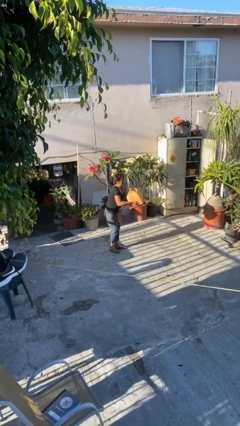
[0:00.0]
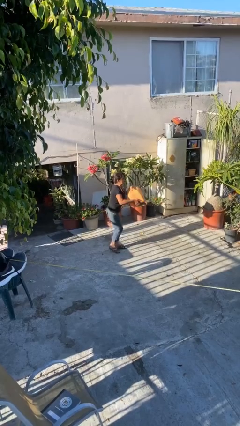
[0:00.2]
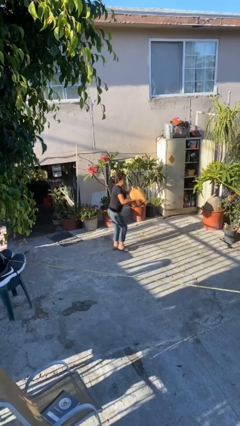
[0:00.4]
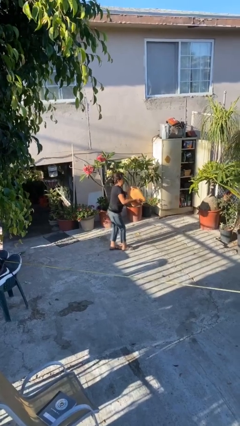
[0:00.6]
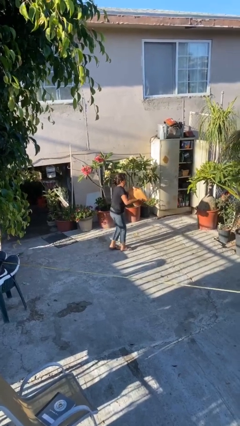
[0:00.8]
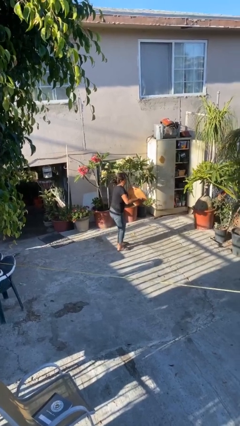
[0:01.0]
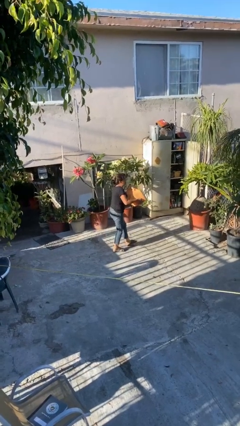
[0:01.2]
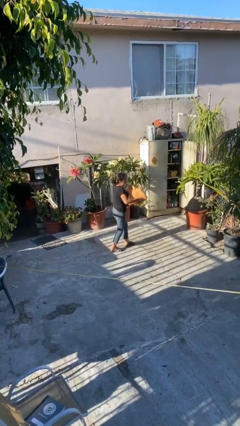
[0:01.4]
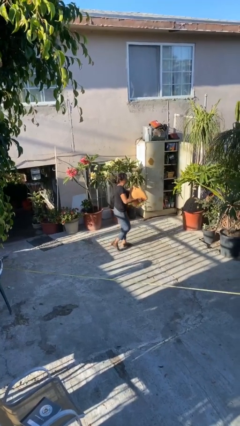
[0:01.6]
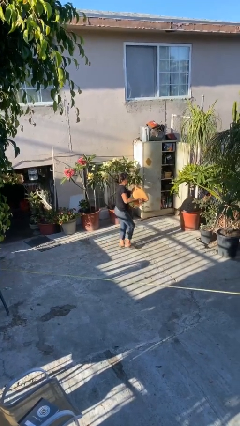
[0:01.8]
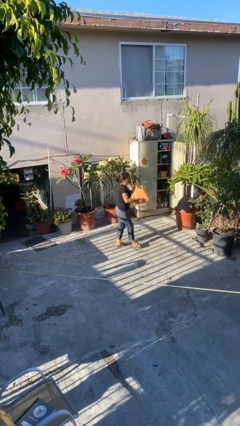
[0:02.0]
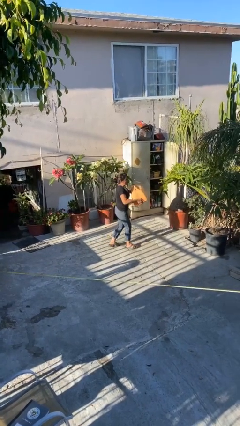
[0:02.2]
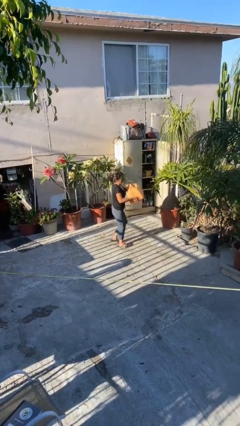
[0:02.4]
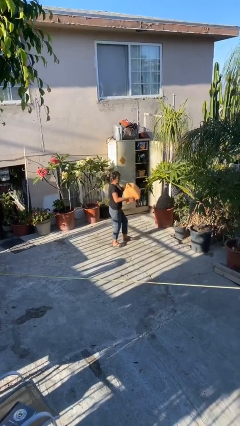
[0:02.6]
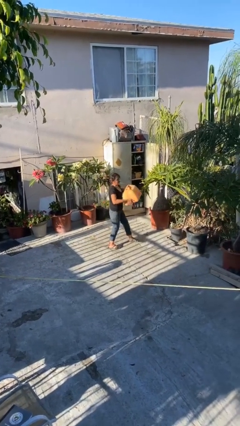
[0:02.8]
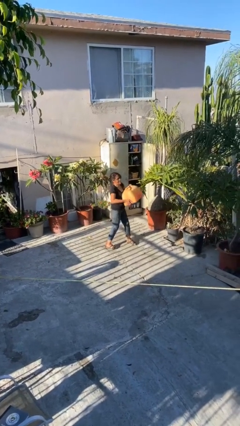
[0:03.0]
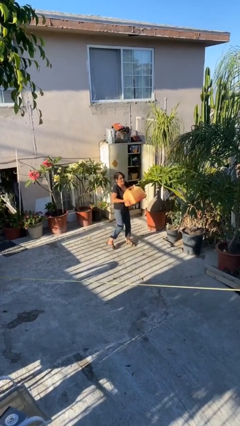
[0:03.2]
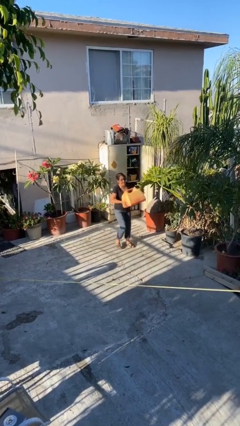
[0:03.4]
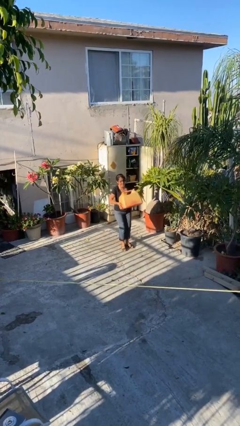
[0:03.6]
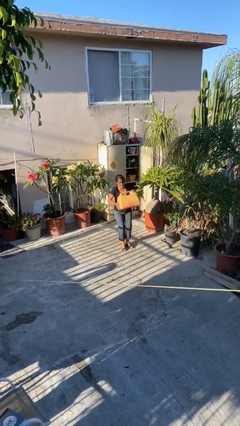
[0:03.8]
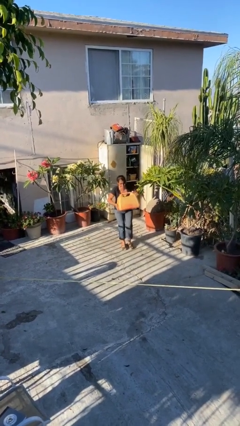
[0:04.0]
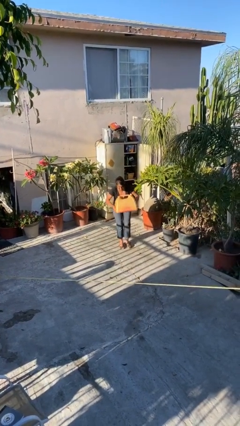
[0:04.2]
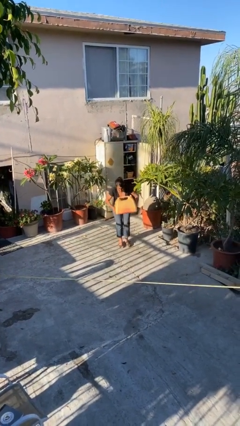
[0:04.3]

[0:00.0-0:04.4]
person carries heavy object

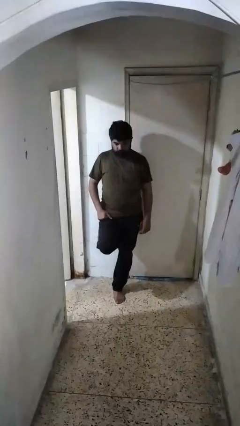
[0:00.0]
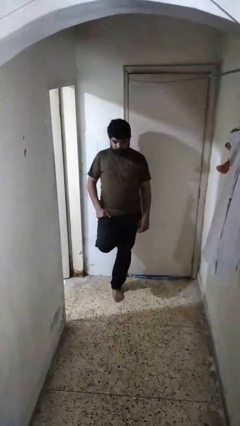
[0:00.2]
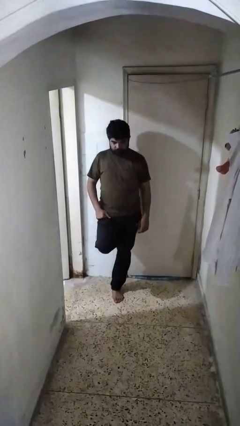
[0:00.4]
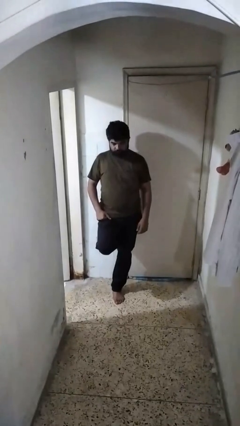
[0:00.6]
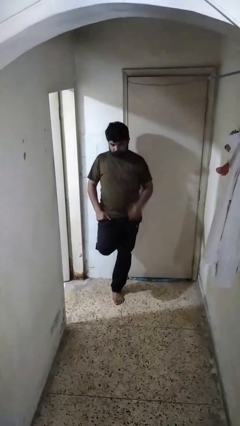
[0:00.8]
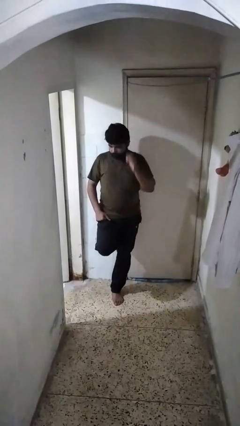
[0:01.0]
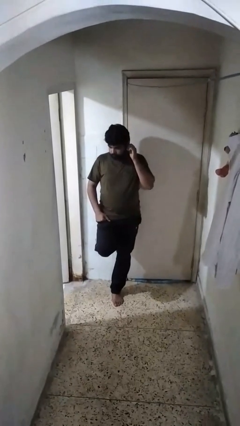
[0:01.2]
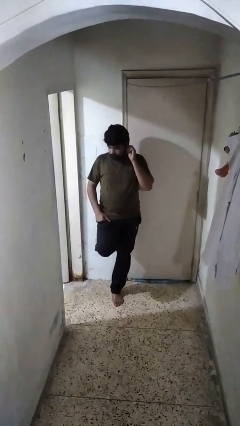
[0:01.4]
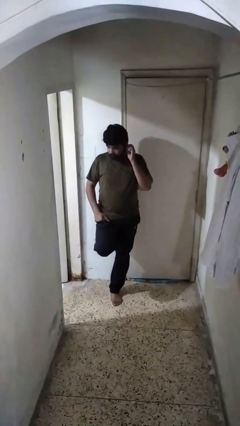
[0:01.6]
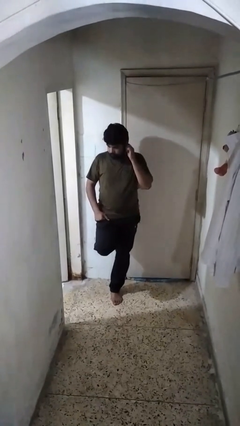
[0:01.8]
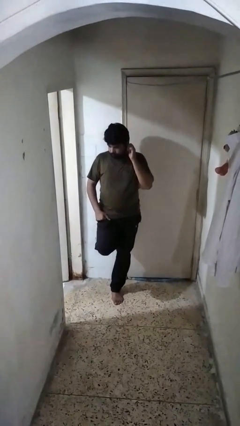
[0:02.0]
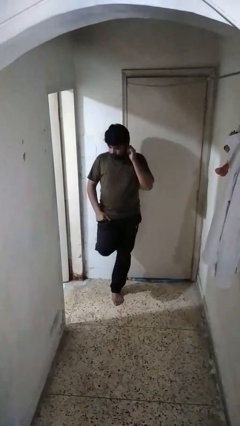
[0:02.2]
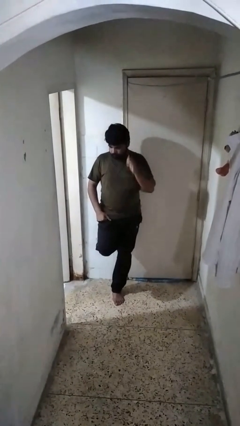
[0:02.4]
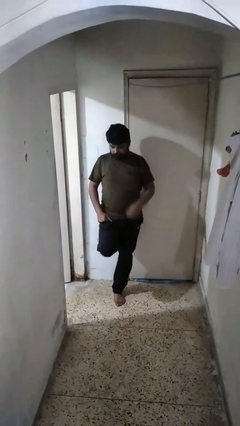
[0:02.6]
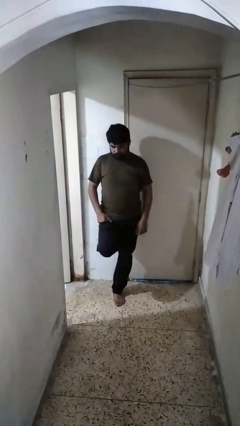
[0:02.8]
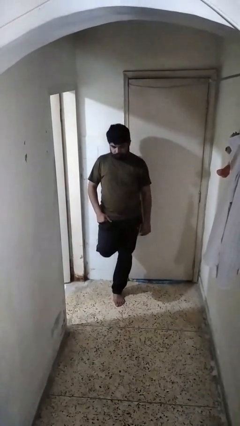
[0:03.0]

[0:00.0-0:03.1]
person touches earlobe

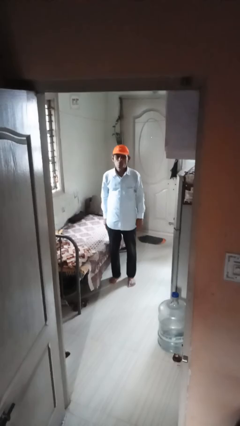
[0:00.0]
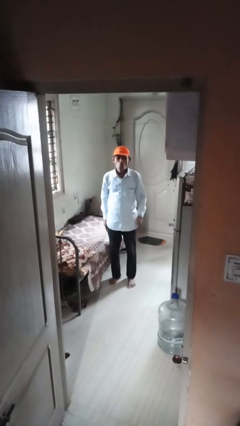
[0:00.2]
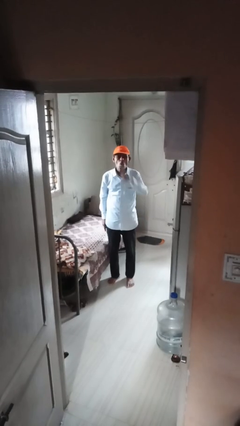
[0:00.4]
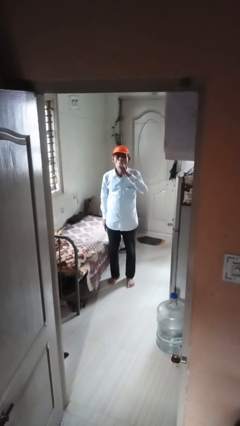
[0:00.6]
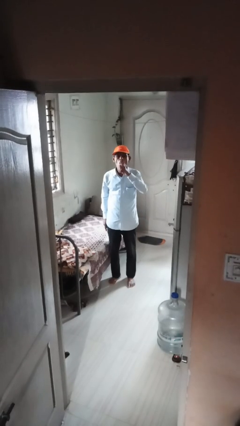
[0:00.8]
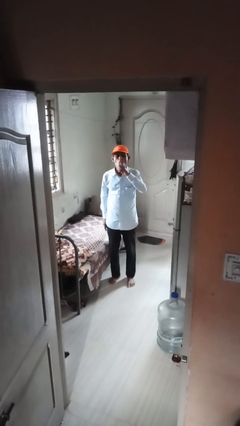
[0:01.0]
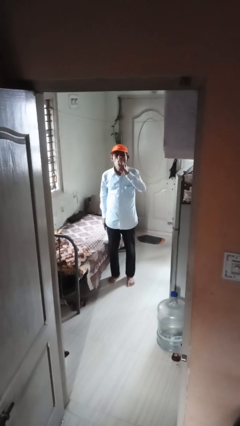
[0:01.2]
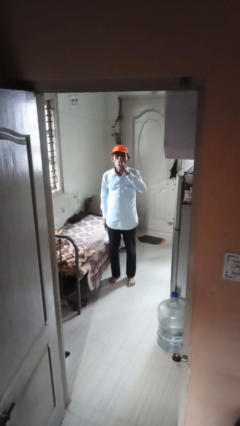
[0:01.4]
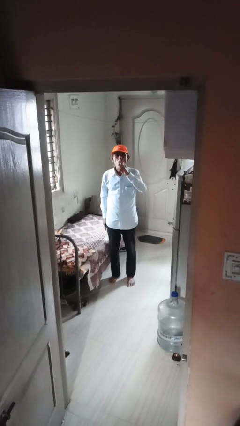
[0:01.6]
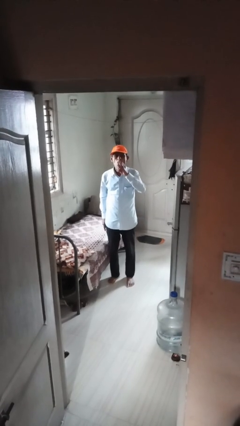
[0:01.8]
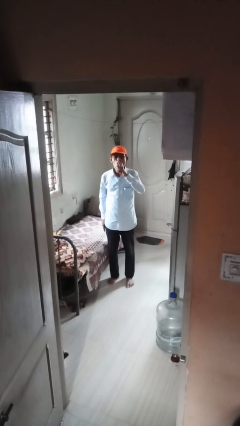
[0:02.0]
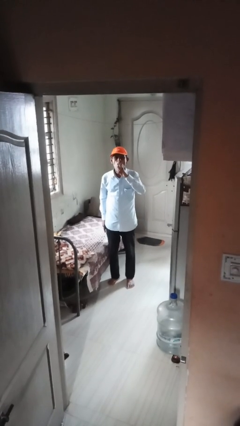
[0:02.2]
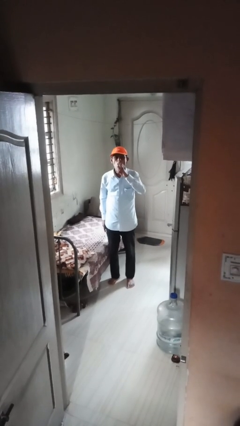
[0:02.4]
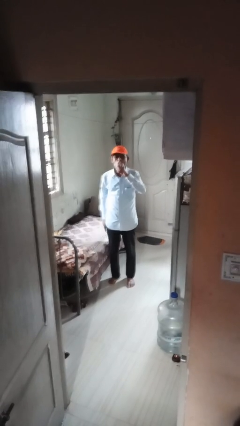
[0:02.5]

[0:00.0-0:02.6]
person gestures be quiet

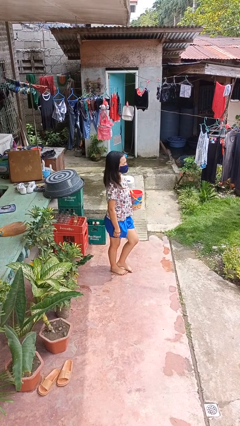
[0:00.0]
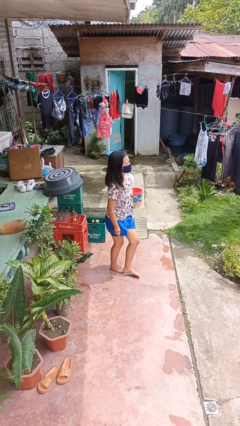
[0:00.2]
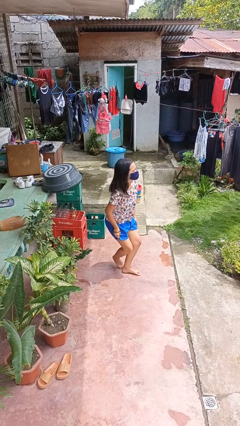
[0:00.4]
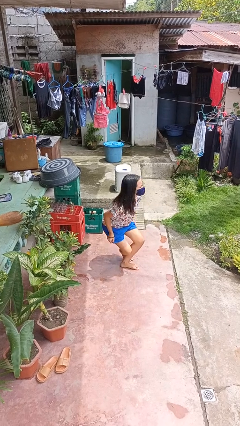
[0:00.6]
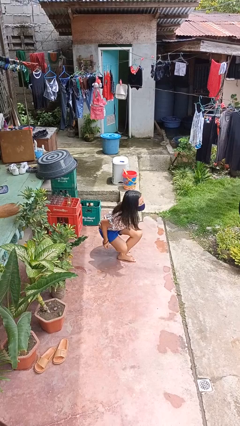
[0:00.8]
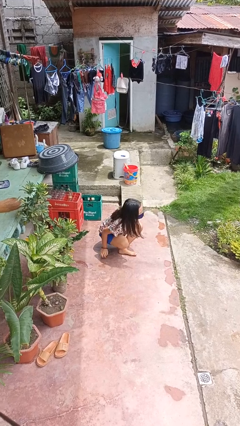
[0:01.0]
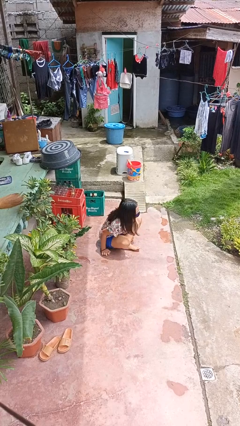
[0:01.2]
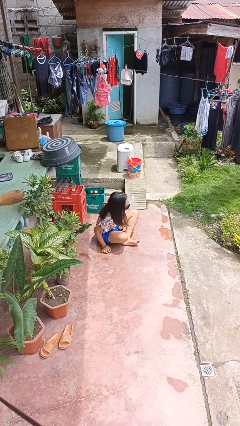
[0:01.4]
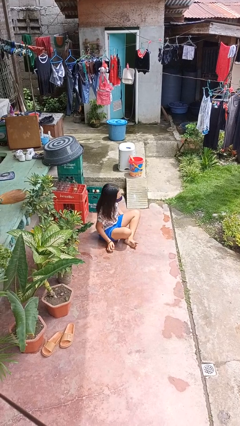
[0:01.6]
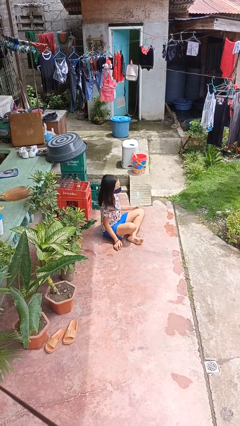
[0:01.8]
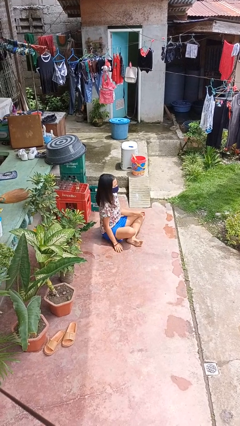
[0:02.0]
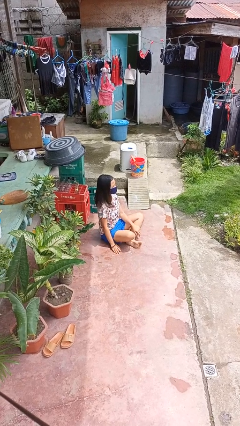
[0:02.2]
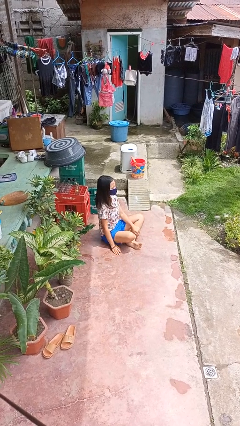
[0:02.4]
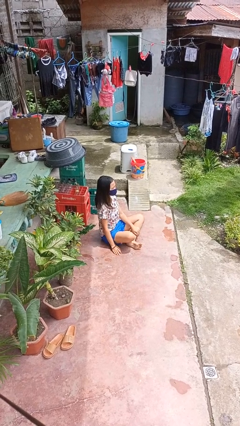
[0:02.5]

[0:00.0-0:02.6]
person sits crisscross

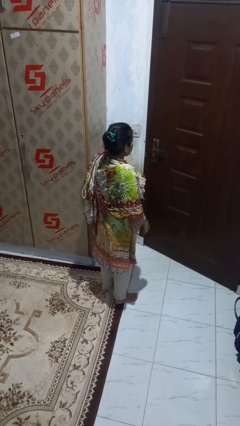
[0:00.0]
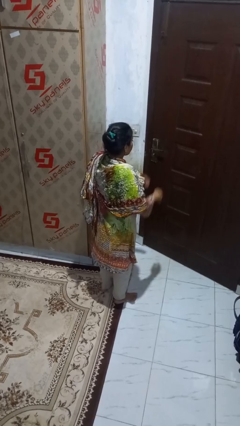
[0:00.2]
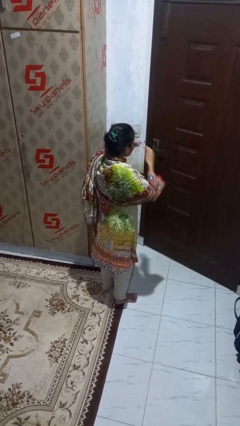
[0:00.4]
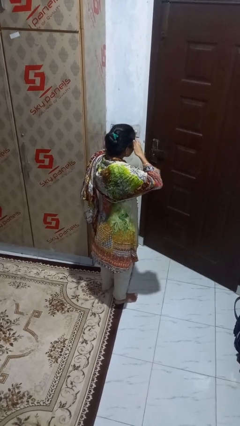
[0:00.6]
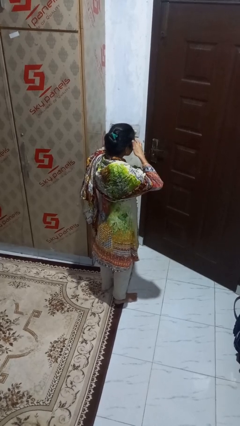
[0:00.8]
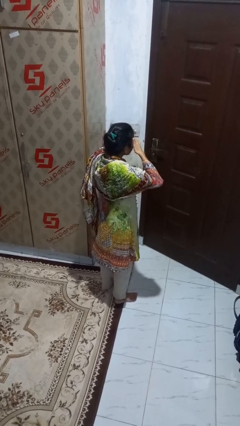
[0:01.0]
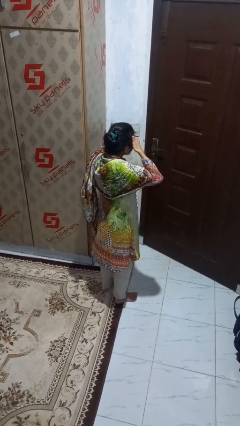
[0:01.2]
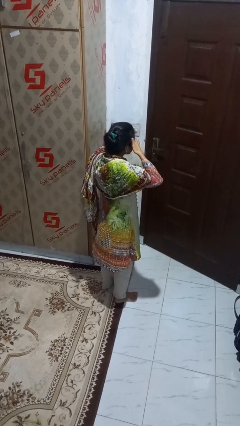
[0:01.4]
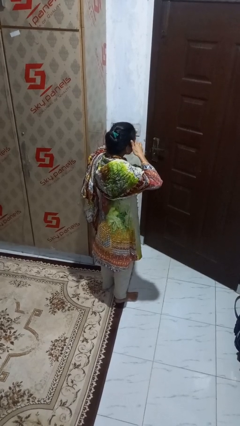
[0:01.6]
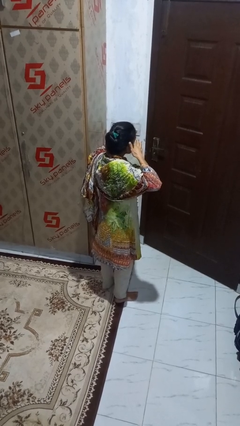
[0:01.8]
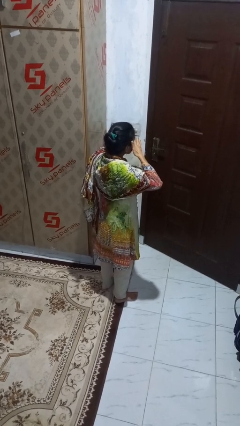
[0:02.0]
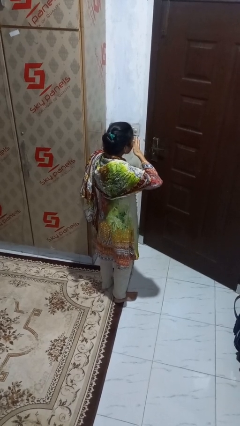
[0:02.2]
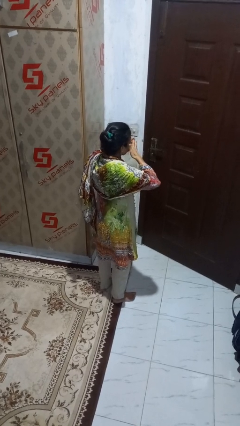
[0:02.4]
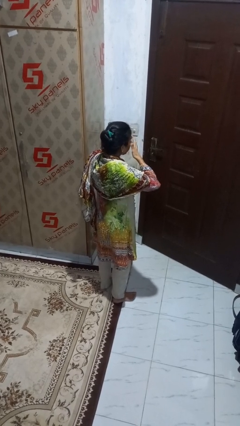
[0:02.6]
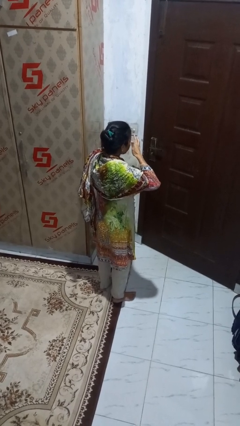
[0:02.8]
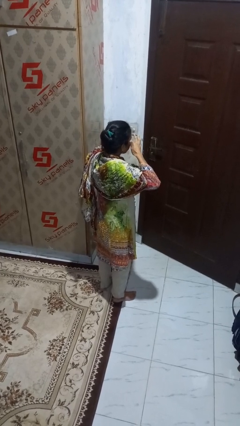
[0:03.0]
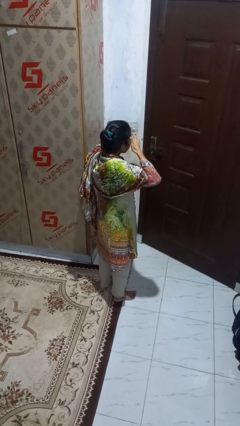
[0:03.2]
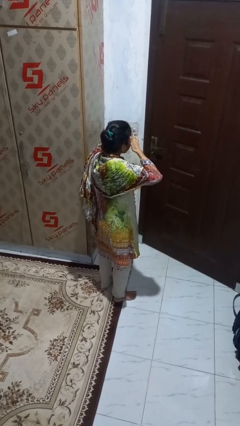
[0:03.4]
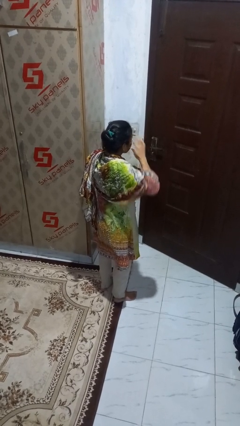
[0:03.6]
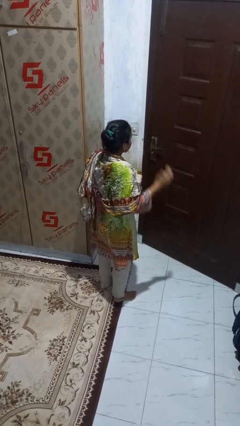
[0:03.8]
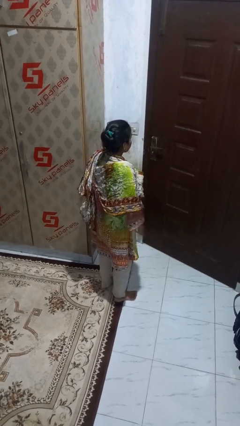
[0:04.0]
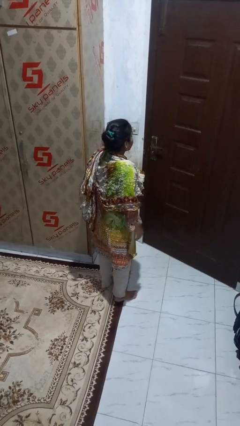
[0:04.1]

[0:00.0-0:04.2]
person rubs eyes

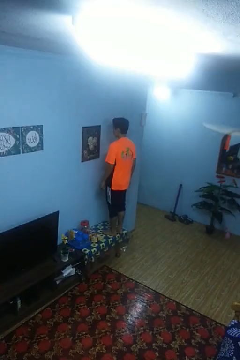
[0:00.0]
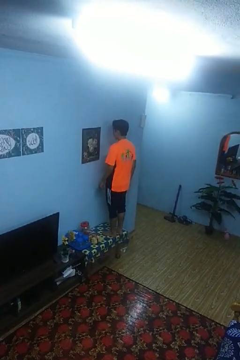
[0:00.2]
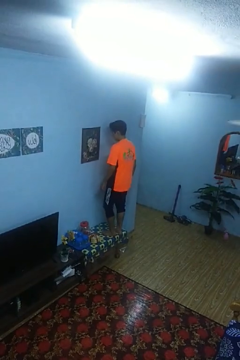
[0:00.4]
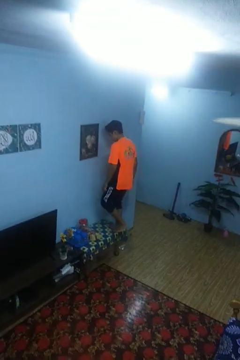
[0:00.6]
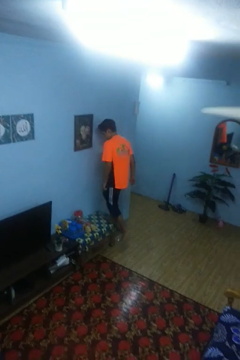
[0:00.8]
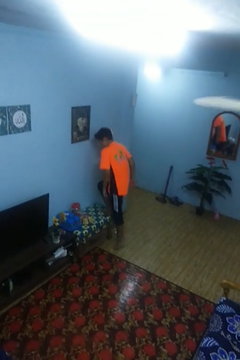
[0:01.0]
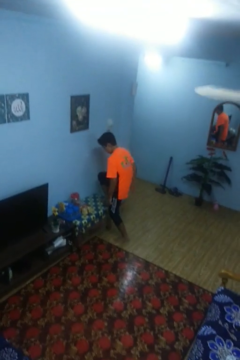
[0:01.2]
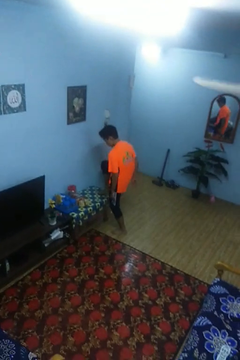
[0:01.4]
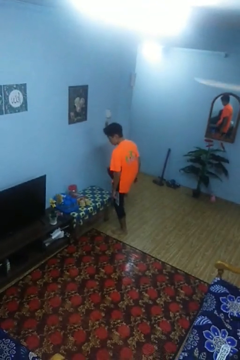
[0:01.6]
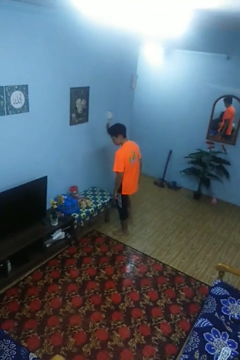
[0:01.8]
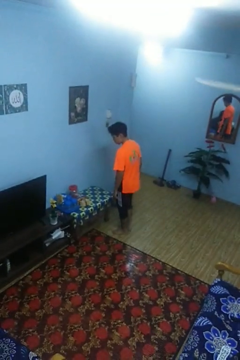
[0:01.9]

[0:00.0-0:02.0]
person climbs off table
